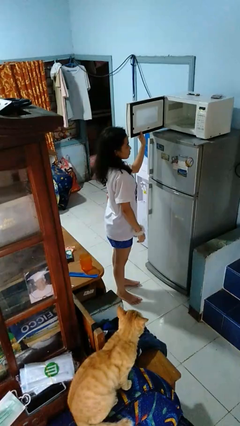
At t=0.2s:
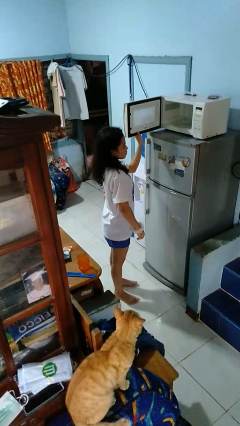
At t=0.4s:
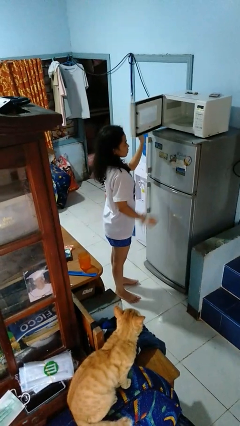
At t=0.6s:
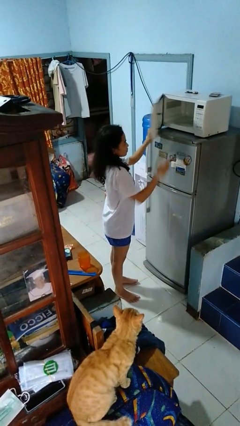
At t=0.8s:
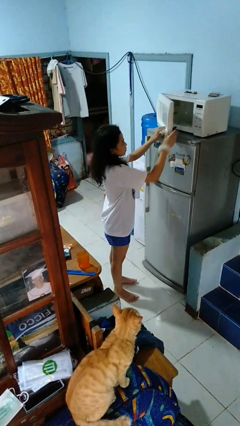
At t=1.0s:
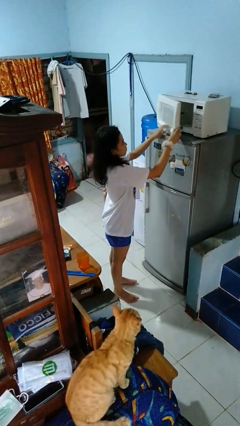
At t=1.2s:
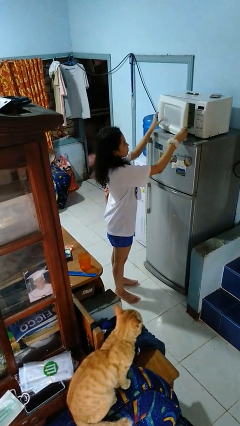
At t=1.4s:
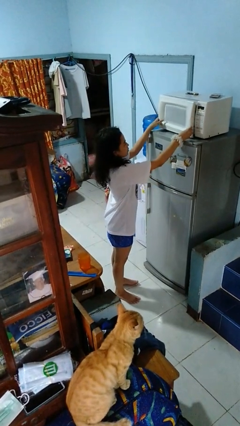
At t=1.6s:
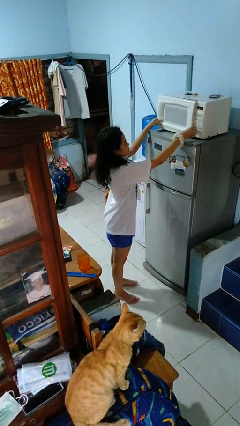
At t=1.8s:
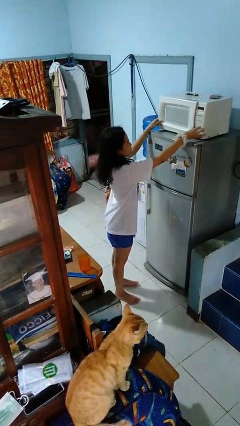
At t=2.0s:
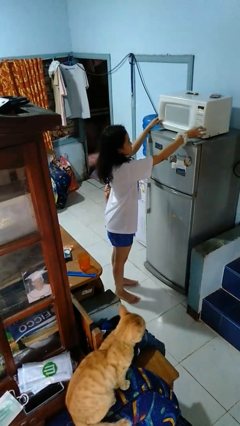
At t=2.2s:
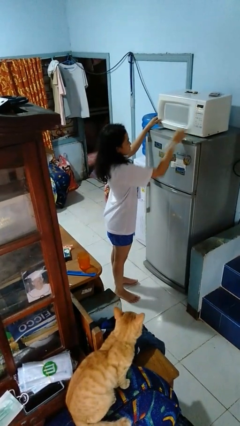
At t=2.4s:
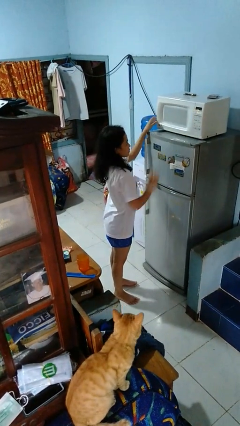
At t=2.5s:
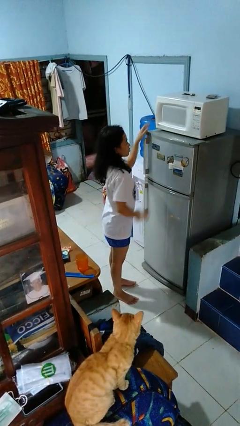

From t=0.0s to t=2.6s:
person closes microwave

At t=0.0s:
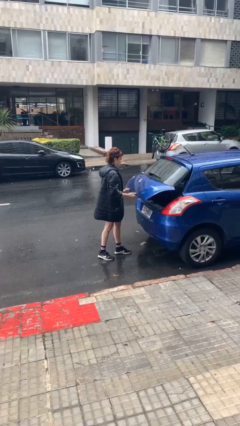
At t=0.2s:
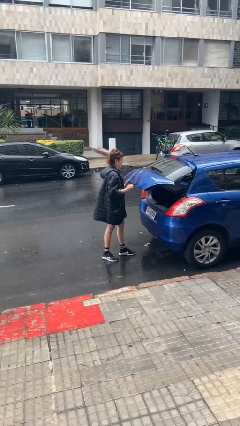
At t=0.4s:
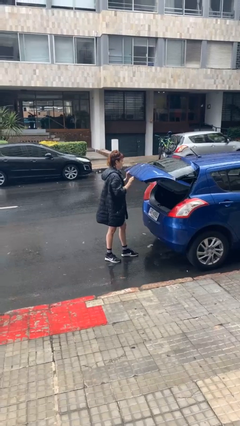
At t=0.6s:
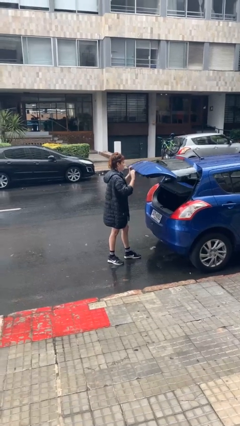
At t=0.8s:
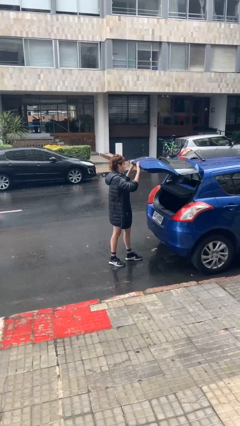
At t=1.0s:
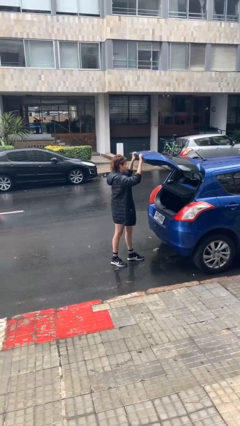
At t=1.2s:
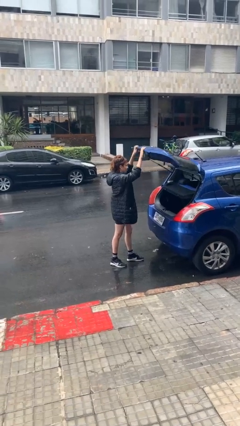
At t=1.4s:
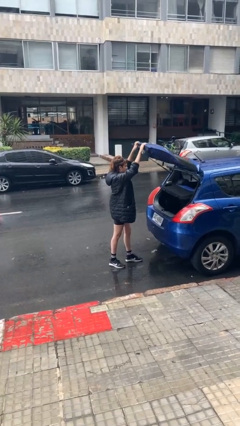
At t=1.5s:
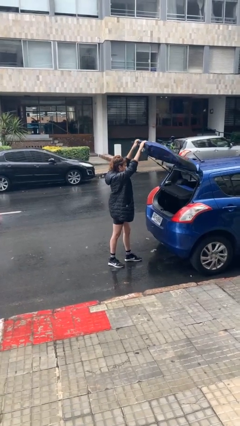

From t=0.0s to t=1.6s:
person opens car trunk

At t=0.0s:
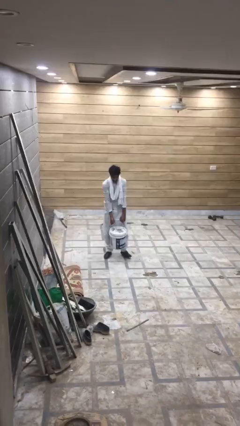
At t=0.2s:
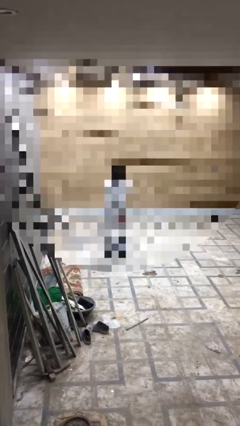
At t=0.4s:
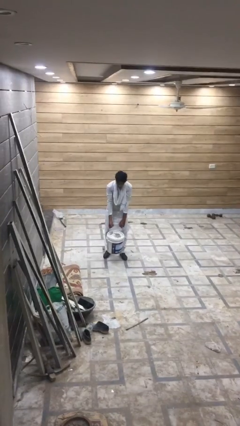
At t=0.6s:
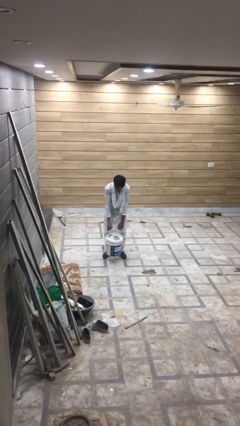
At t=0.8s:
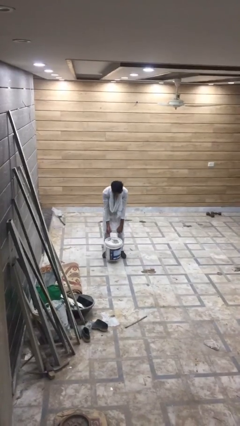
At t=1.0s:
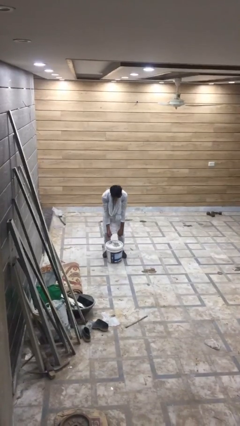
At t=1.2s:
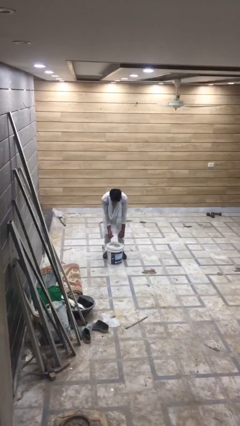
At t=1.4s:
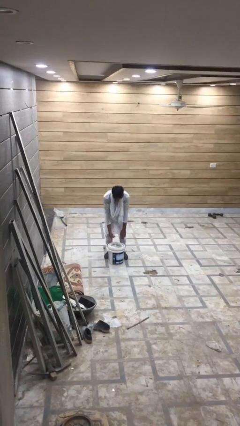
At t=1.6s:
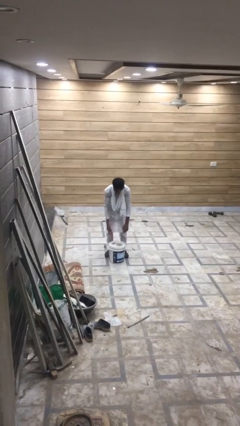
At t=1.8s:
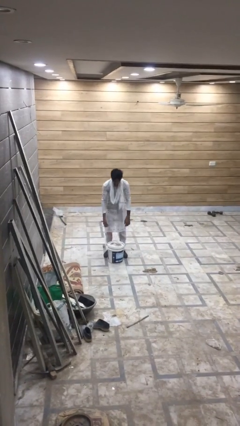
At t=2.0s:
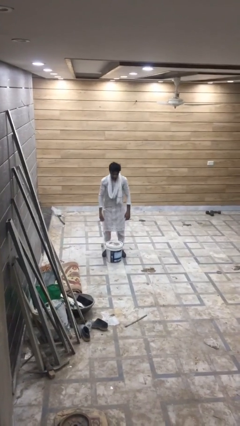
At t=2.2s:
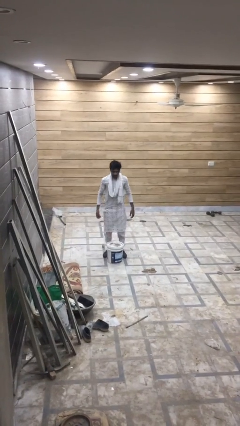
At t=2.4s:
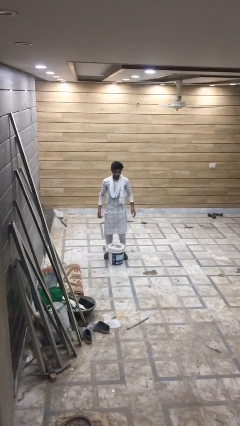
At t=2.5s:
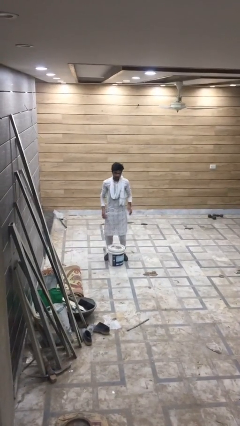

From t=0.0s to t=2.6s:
person puts down object on floor

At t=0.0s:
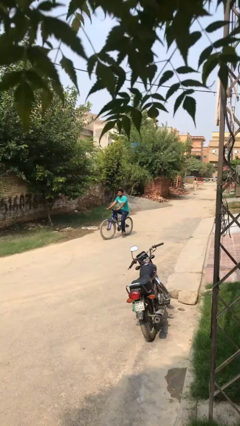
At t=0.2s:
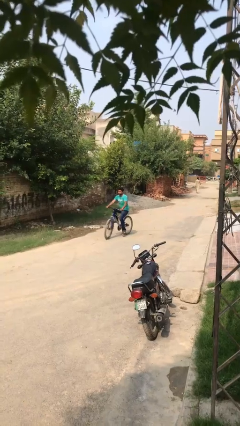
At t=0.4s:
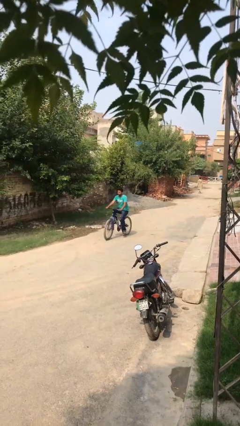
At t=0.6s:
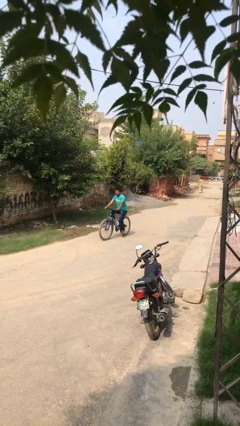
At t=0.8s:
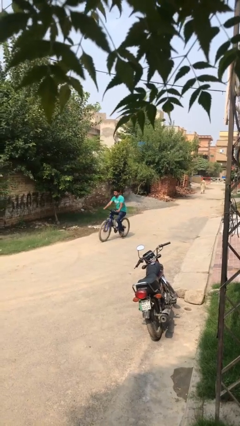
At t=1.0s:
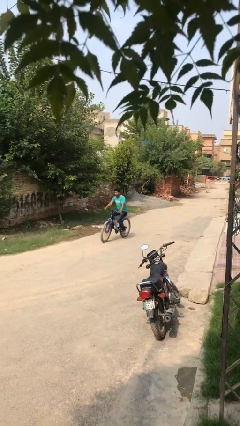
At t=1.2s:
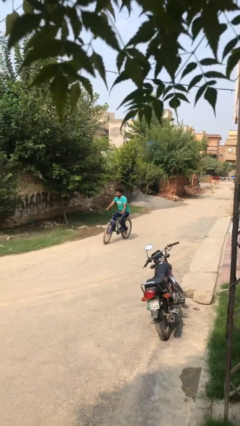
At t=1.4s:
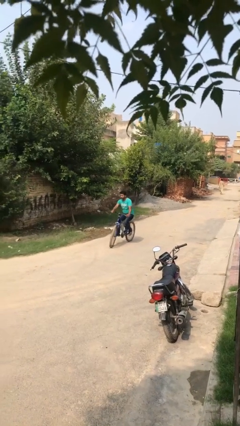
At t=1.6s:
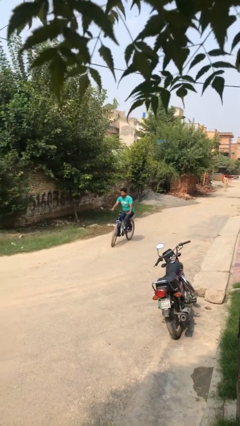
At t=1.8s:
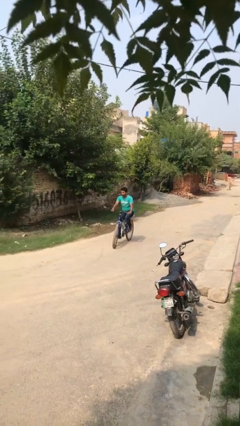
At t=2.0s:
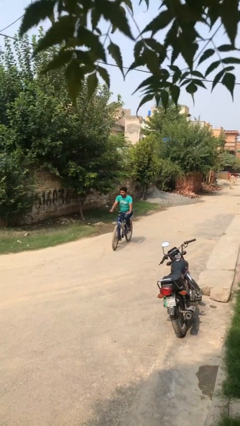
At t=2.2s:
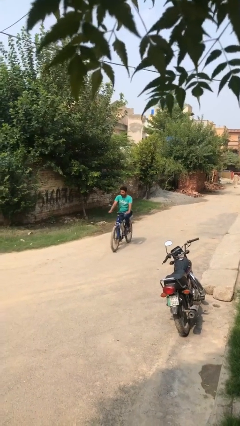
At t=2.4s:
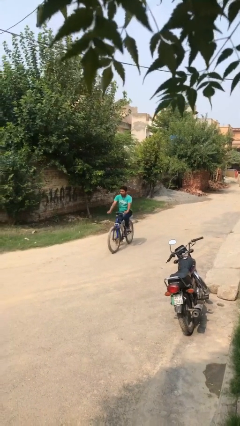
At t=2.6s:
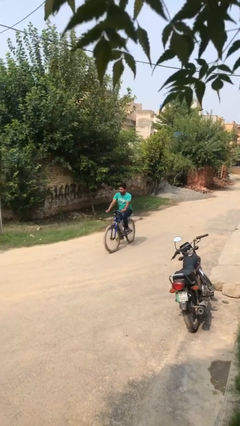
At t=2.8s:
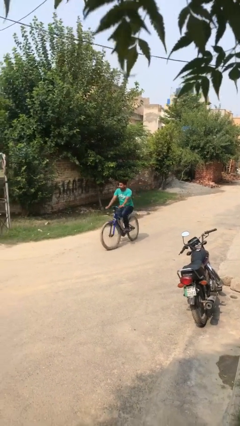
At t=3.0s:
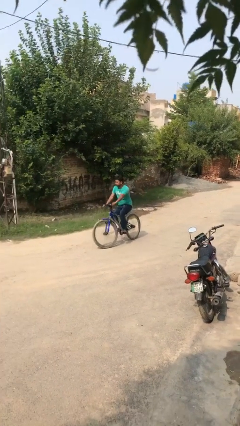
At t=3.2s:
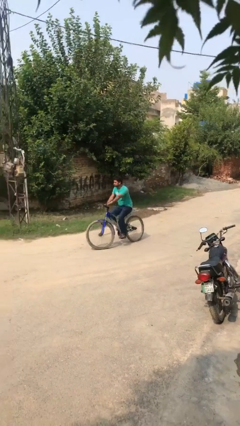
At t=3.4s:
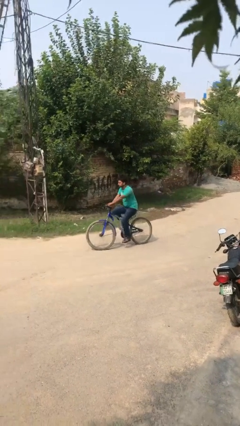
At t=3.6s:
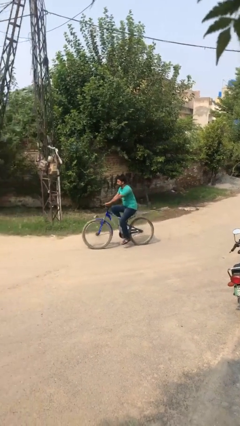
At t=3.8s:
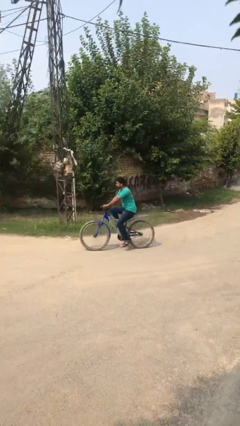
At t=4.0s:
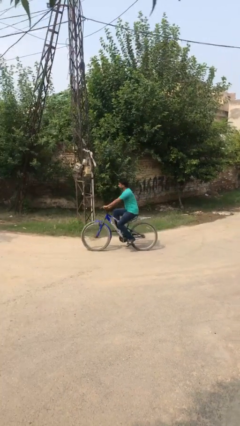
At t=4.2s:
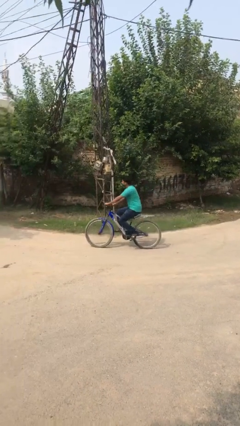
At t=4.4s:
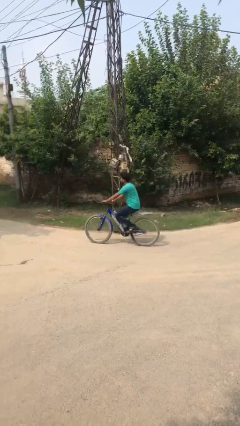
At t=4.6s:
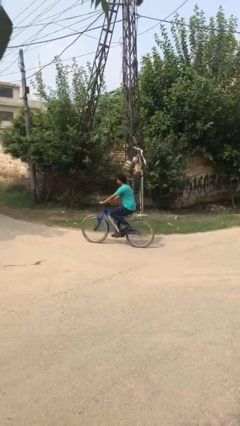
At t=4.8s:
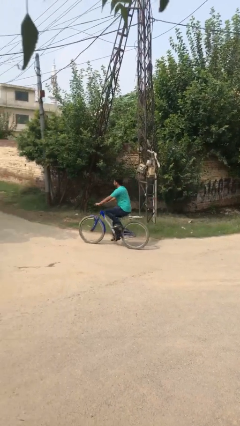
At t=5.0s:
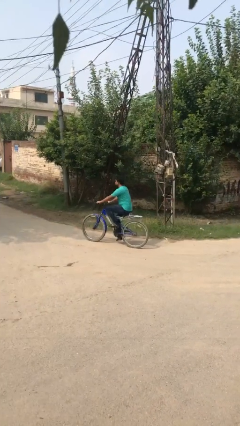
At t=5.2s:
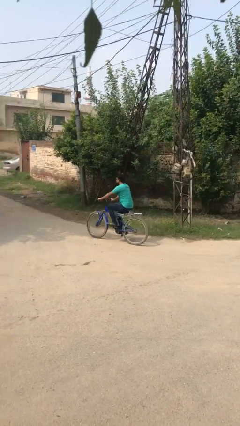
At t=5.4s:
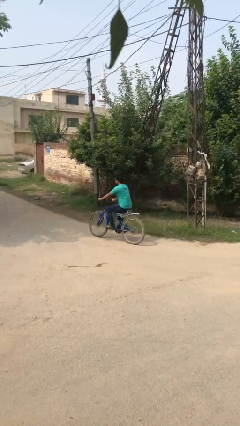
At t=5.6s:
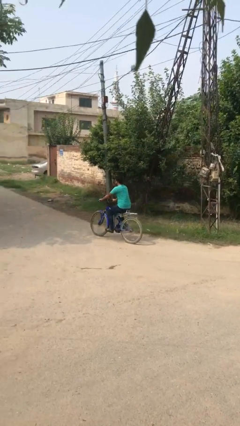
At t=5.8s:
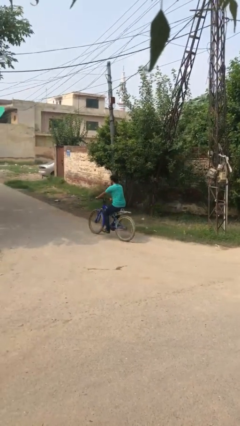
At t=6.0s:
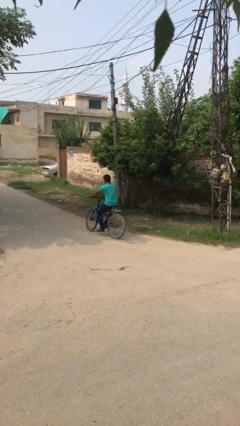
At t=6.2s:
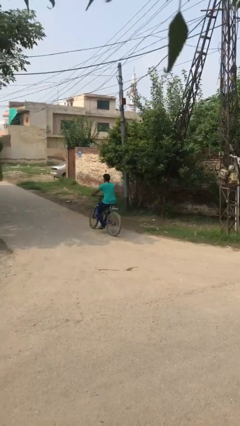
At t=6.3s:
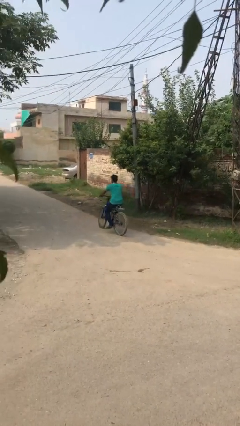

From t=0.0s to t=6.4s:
person rides bicycle

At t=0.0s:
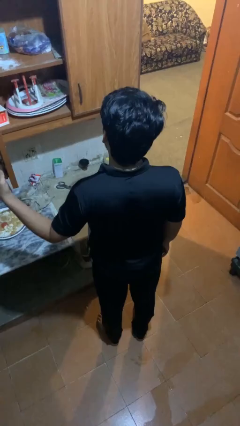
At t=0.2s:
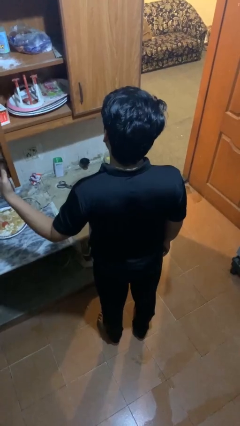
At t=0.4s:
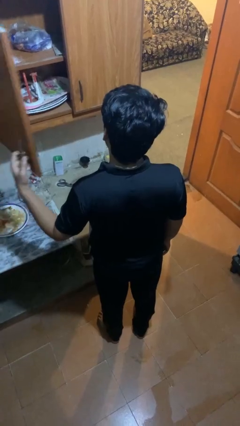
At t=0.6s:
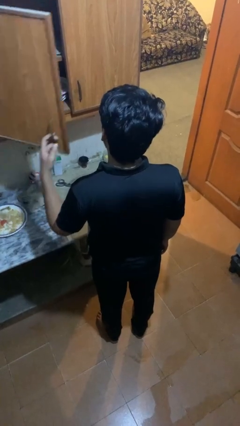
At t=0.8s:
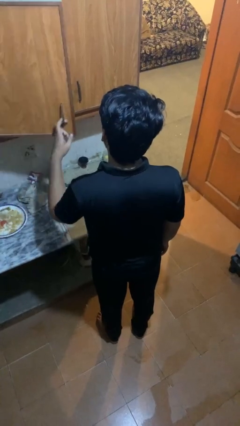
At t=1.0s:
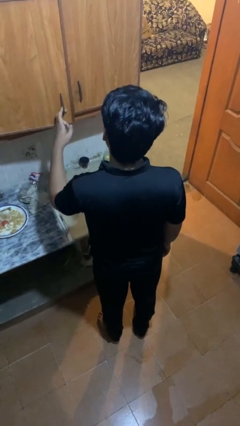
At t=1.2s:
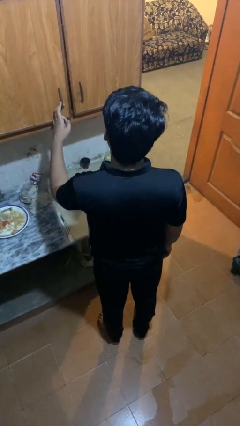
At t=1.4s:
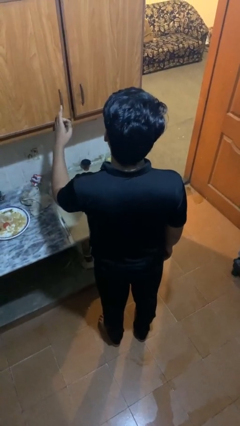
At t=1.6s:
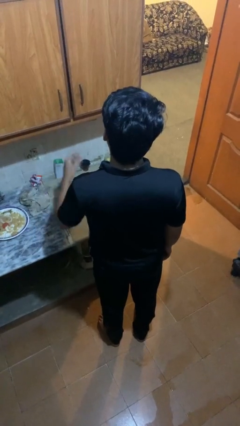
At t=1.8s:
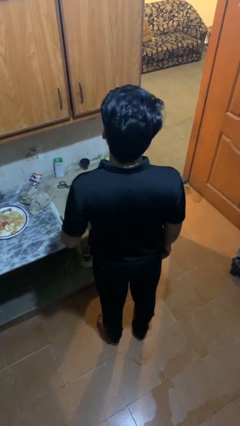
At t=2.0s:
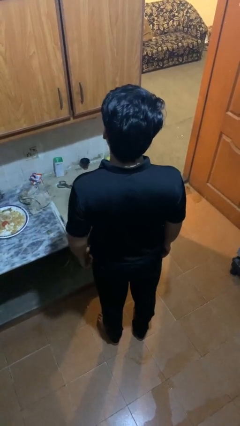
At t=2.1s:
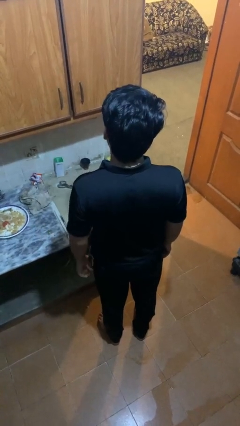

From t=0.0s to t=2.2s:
person closes cabinet

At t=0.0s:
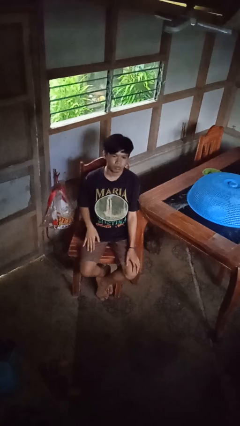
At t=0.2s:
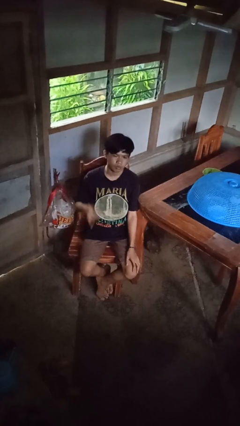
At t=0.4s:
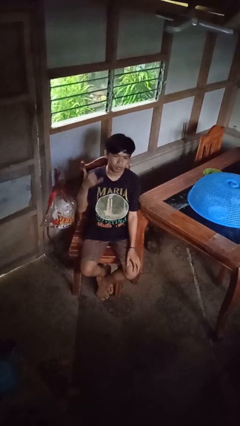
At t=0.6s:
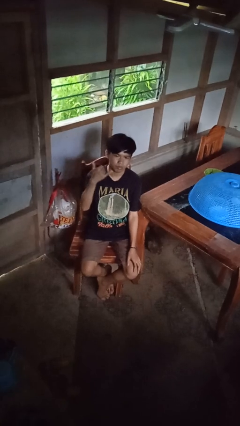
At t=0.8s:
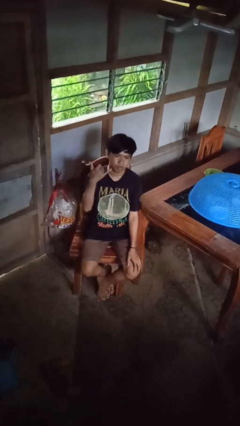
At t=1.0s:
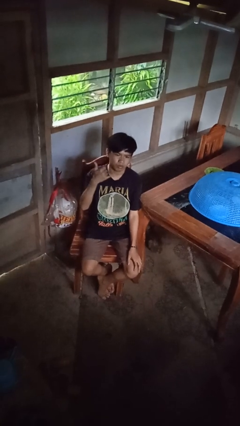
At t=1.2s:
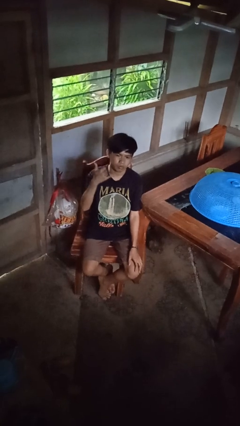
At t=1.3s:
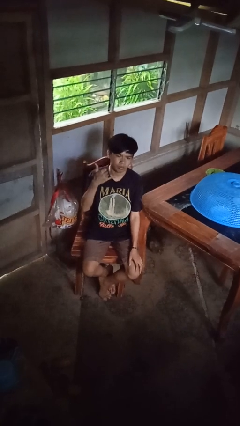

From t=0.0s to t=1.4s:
person gestures hang loose

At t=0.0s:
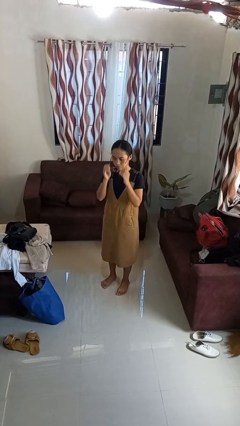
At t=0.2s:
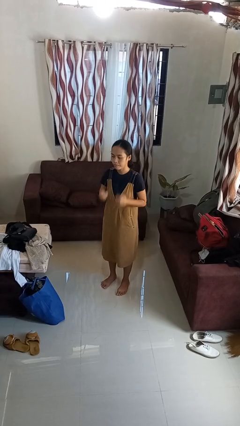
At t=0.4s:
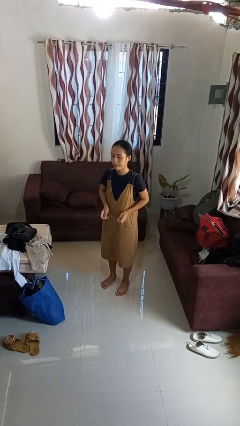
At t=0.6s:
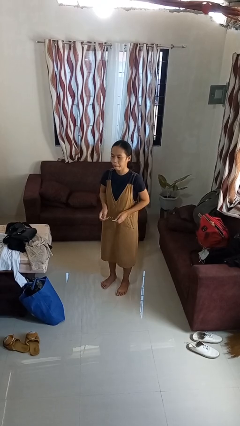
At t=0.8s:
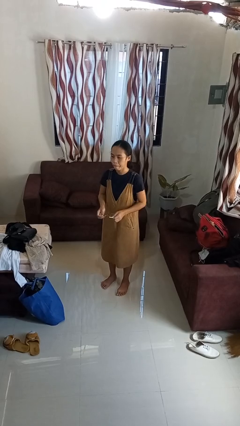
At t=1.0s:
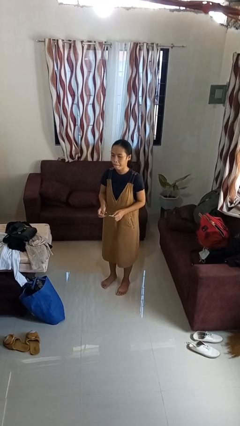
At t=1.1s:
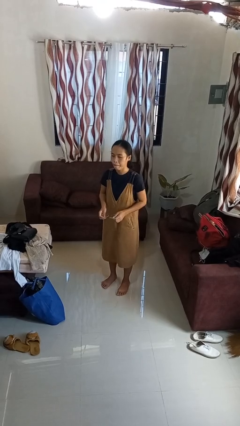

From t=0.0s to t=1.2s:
person takes off glasses
